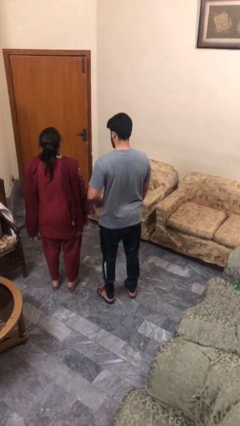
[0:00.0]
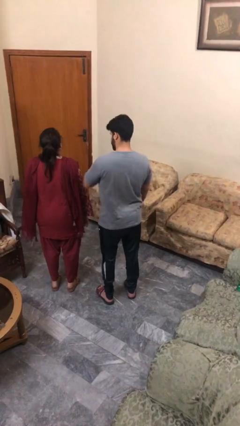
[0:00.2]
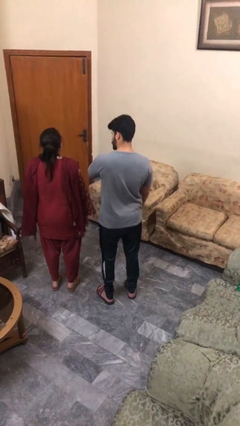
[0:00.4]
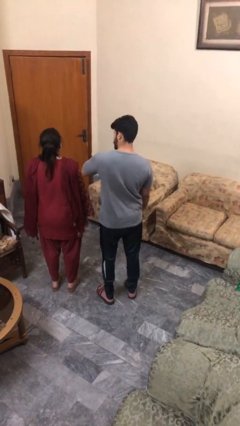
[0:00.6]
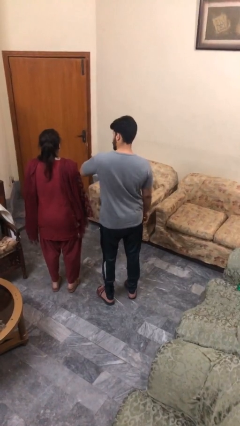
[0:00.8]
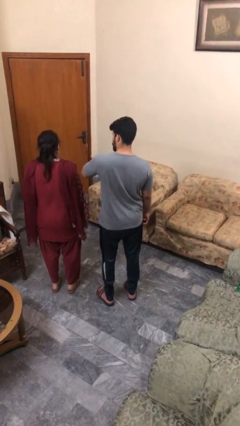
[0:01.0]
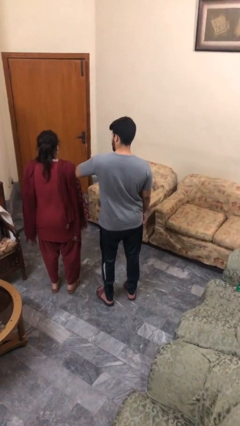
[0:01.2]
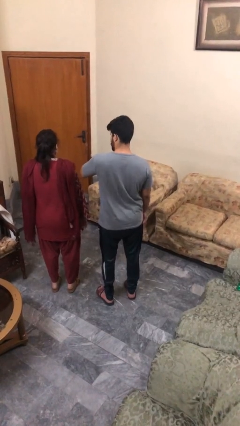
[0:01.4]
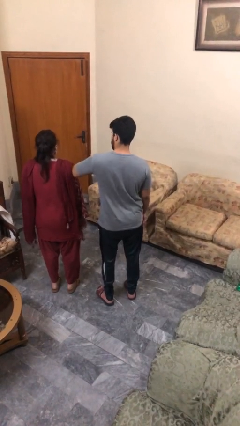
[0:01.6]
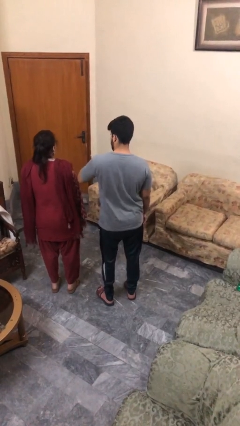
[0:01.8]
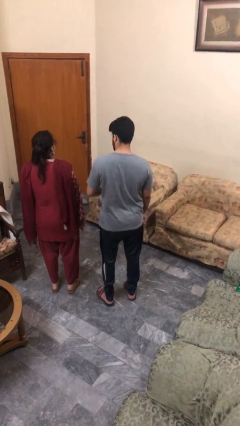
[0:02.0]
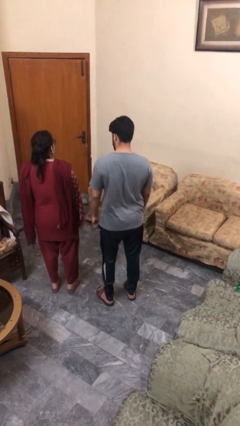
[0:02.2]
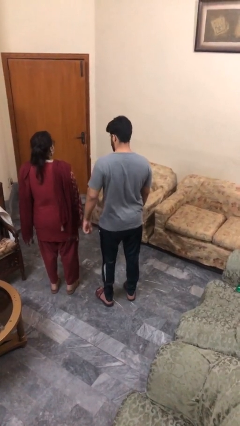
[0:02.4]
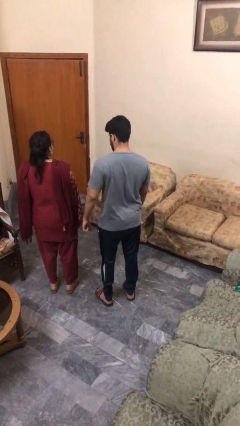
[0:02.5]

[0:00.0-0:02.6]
person nudges person with elbow

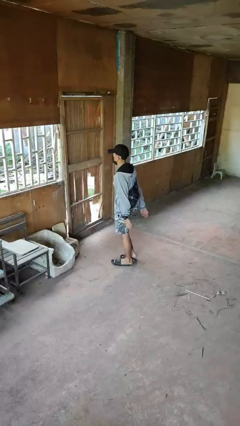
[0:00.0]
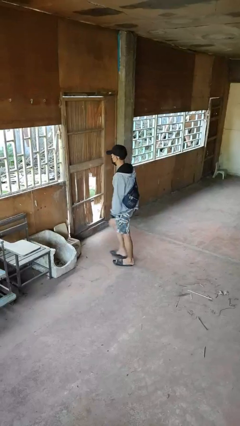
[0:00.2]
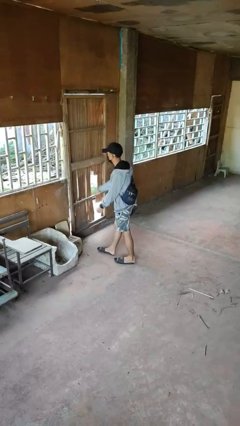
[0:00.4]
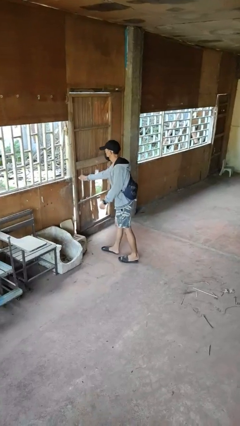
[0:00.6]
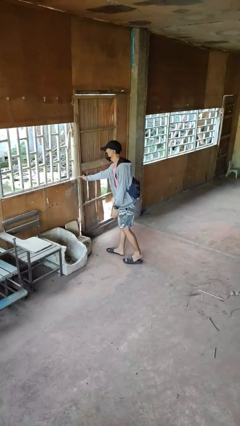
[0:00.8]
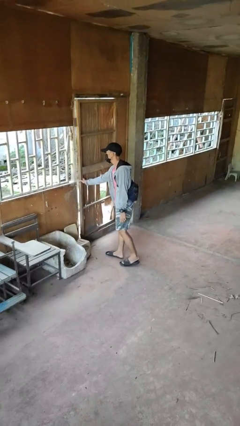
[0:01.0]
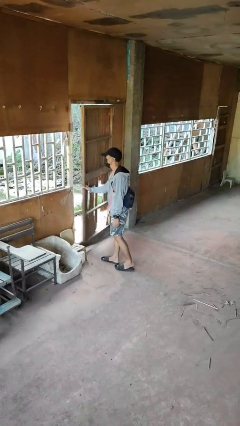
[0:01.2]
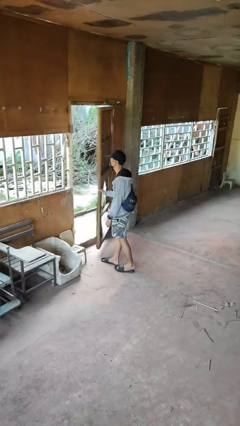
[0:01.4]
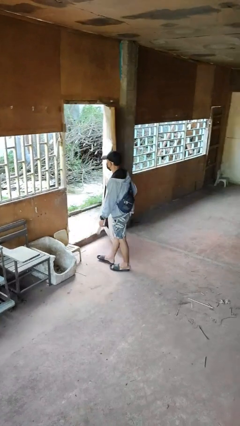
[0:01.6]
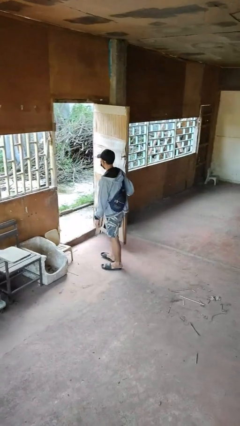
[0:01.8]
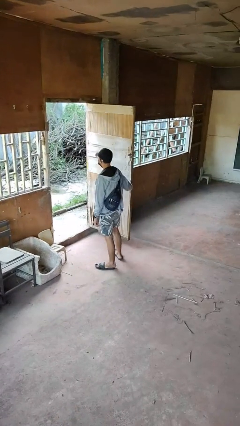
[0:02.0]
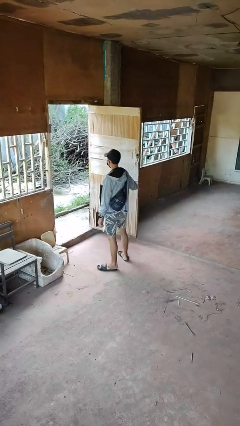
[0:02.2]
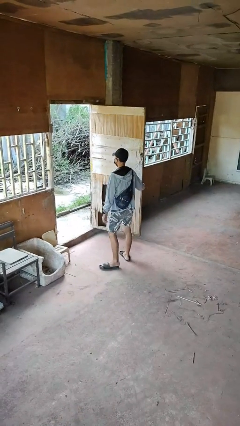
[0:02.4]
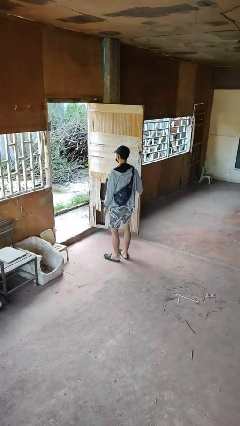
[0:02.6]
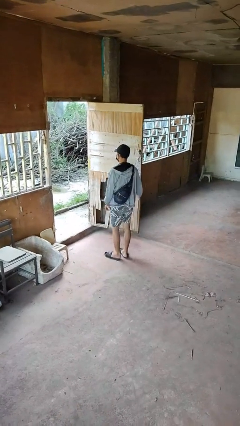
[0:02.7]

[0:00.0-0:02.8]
person opens facility door

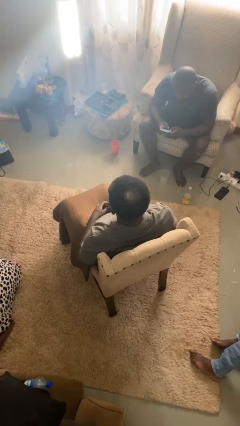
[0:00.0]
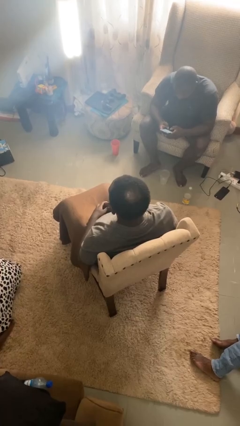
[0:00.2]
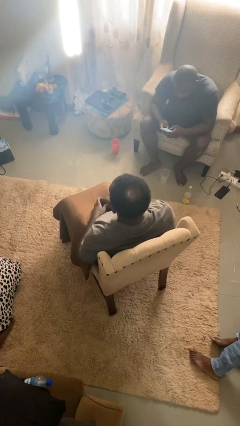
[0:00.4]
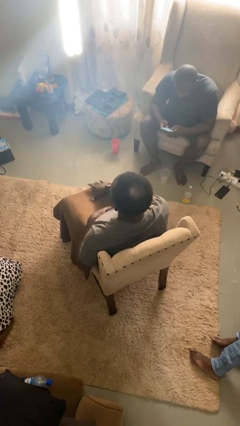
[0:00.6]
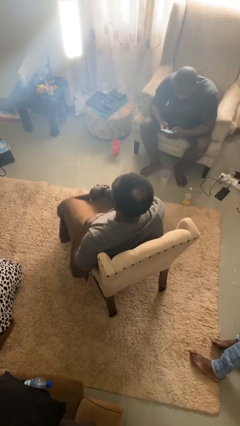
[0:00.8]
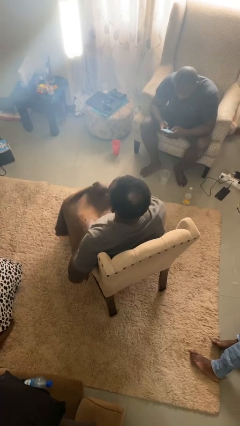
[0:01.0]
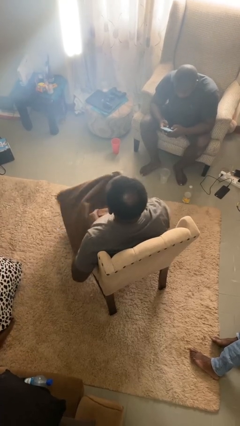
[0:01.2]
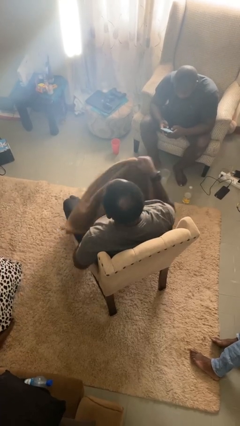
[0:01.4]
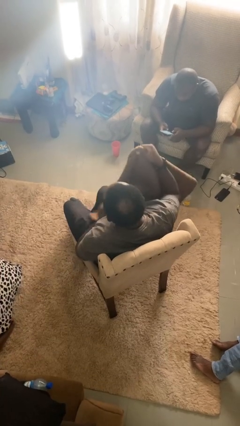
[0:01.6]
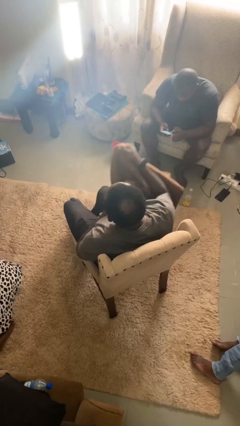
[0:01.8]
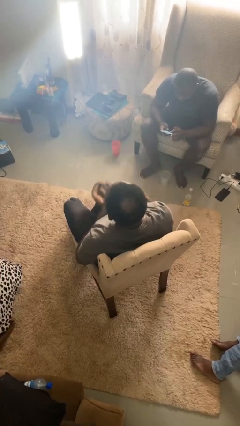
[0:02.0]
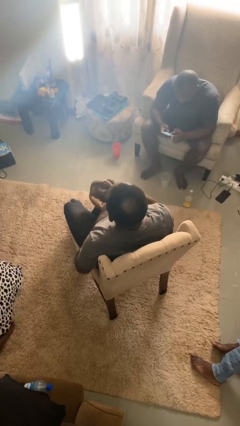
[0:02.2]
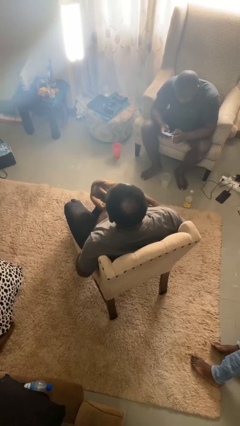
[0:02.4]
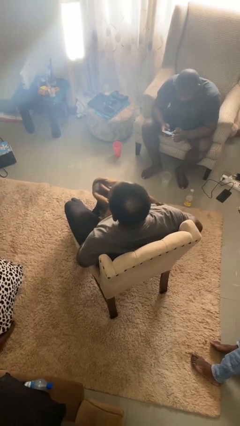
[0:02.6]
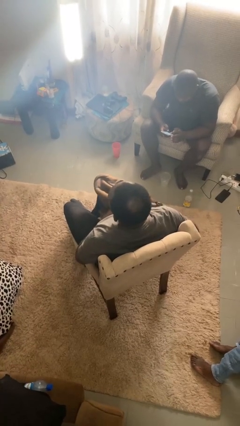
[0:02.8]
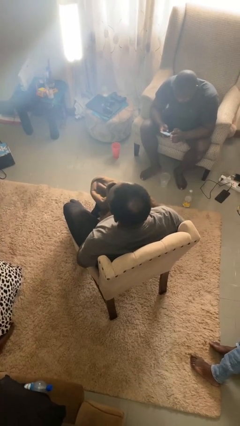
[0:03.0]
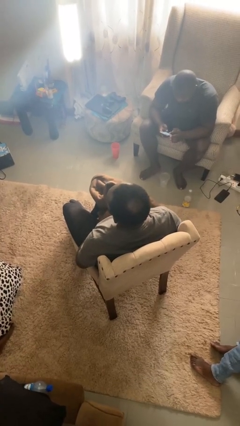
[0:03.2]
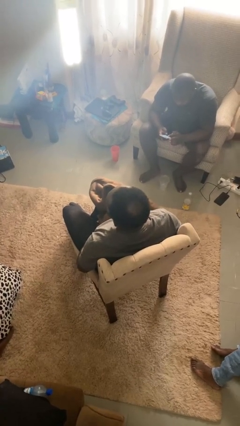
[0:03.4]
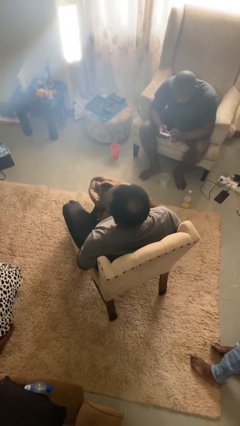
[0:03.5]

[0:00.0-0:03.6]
person uncovers with blanket

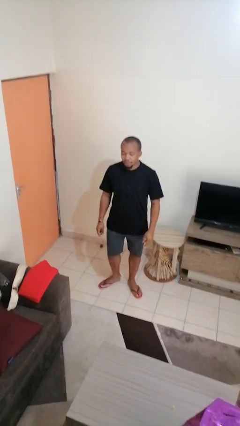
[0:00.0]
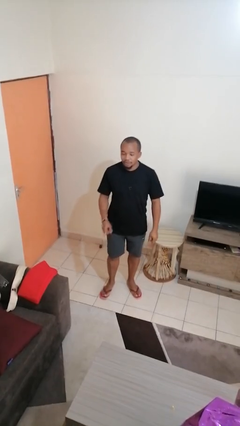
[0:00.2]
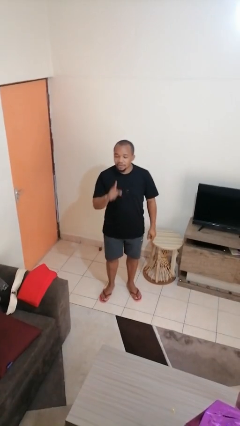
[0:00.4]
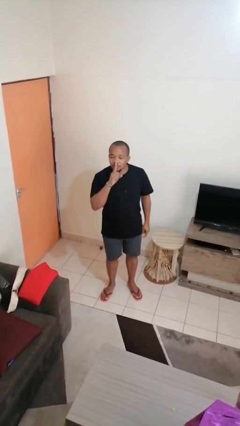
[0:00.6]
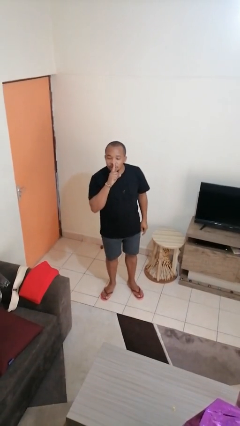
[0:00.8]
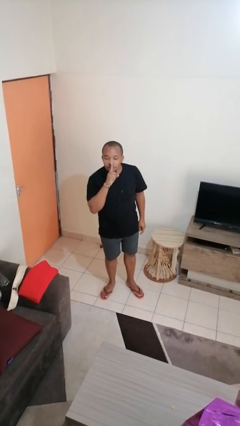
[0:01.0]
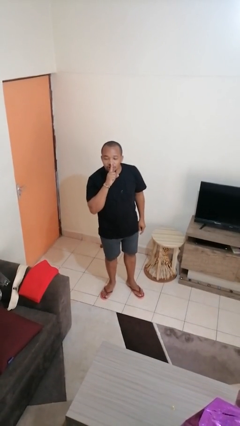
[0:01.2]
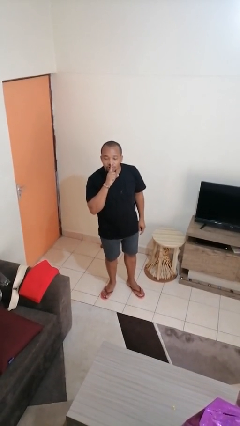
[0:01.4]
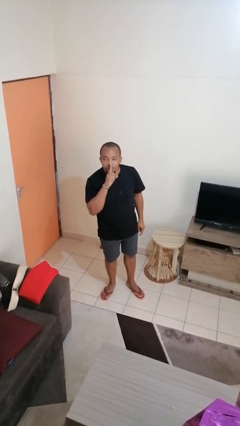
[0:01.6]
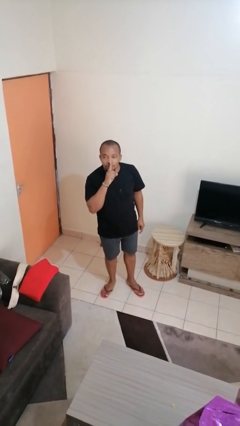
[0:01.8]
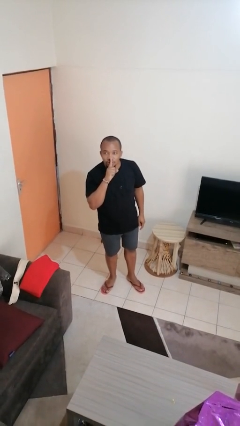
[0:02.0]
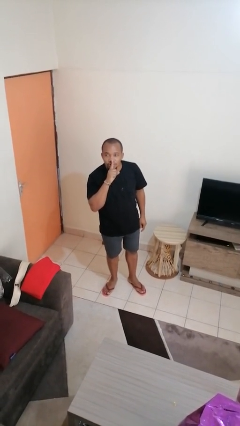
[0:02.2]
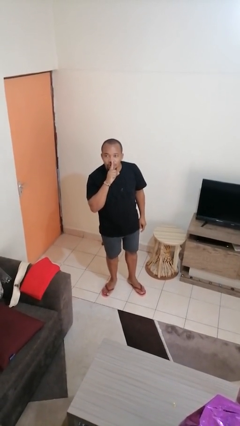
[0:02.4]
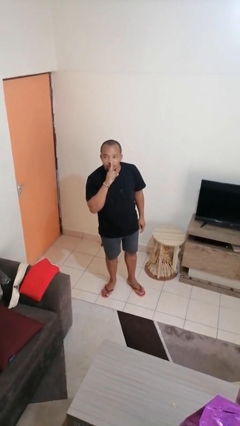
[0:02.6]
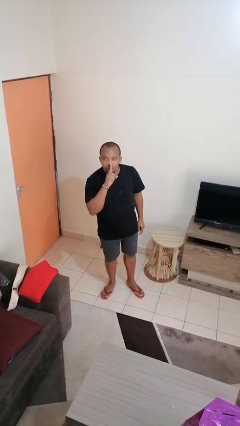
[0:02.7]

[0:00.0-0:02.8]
person gestures be quiet

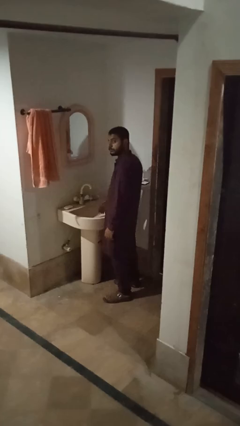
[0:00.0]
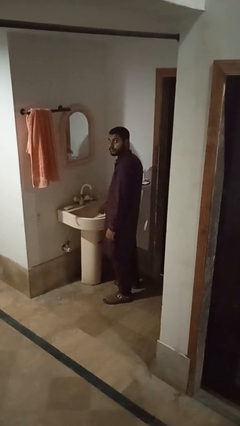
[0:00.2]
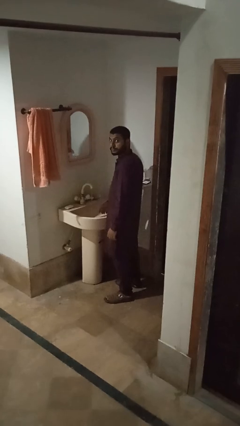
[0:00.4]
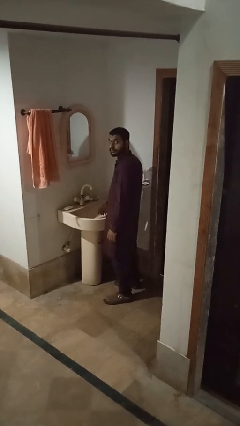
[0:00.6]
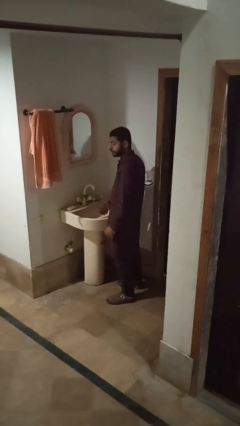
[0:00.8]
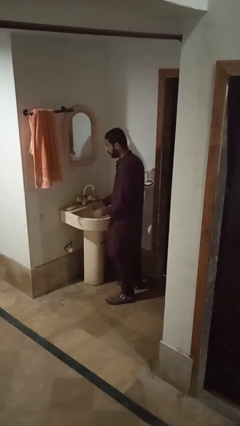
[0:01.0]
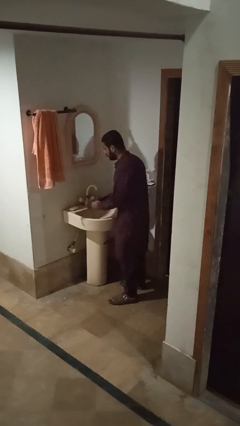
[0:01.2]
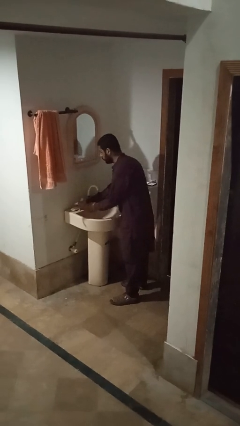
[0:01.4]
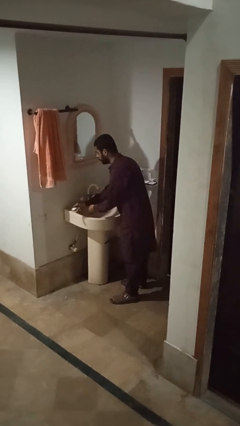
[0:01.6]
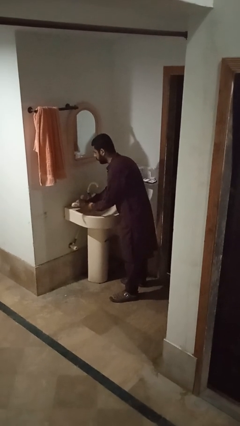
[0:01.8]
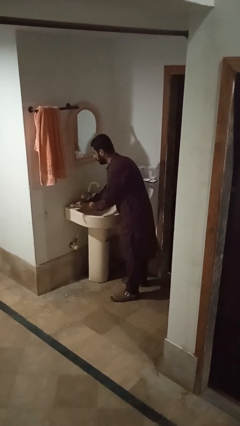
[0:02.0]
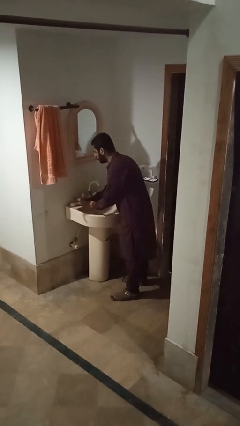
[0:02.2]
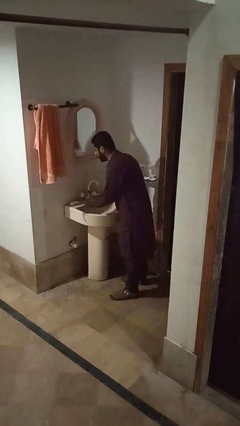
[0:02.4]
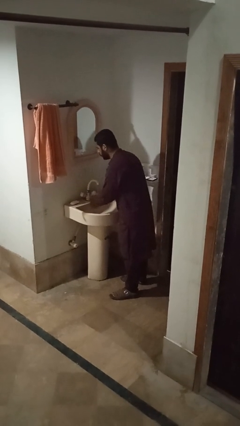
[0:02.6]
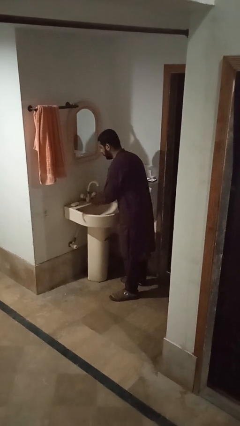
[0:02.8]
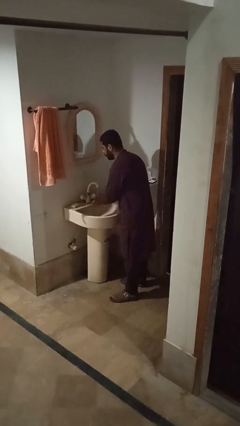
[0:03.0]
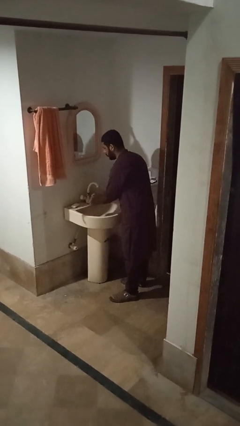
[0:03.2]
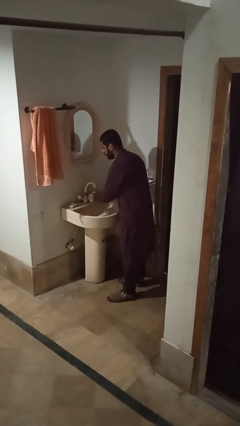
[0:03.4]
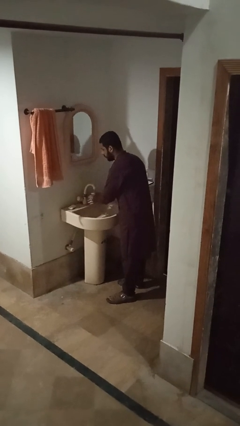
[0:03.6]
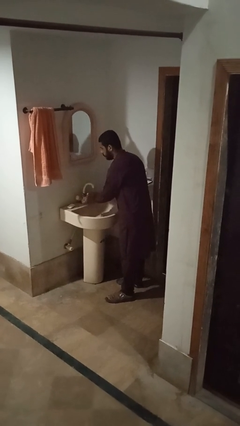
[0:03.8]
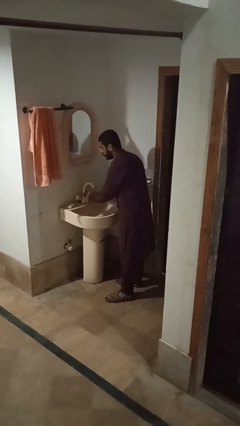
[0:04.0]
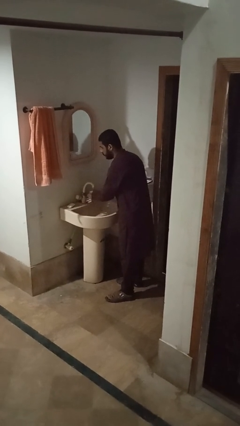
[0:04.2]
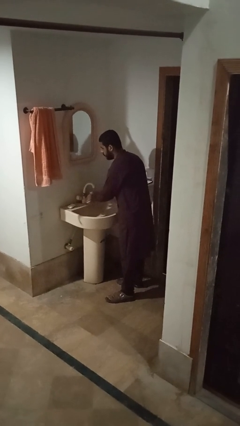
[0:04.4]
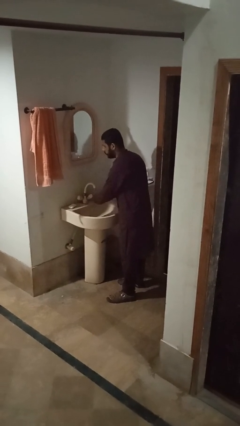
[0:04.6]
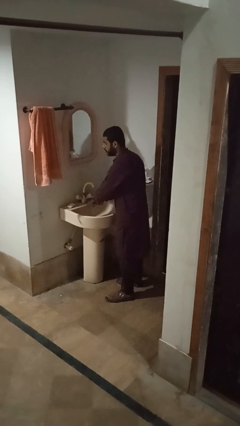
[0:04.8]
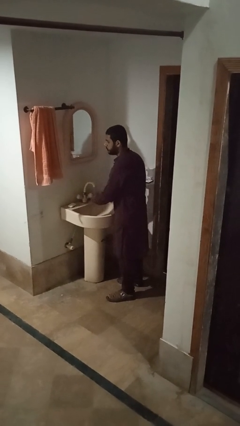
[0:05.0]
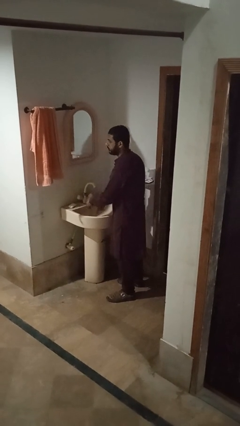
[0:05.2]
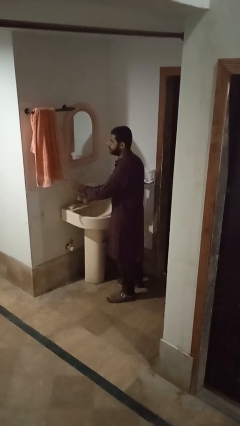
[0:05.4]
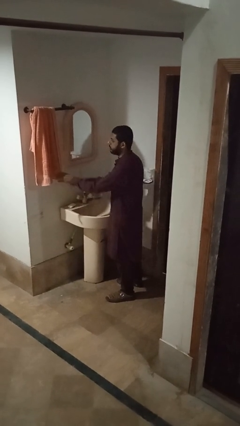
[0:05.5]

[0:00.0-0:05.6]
person washes hands
